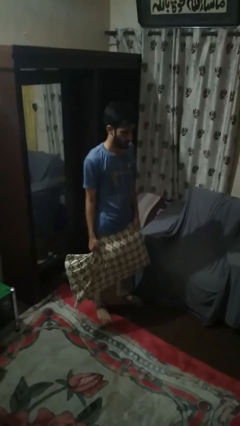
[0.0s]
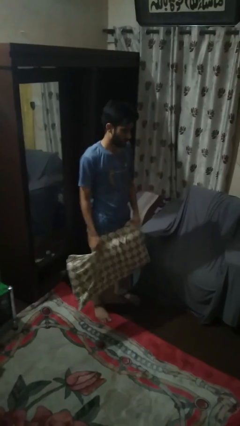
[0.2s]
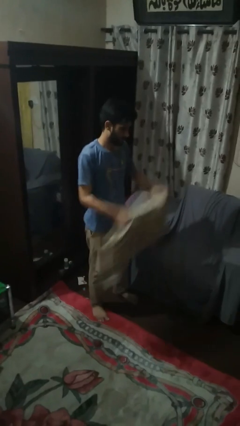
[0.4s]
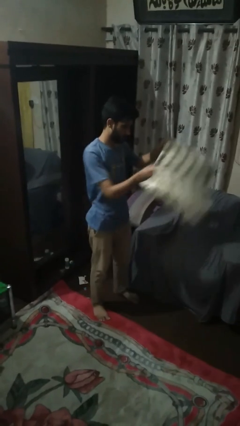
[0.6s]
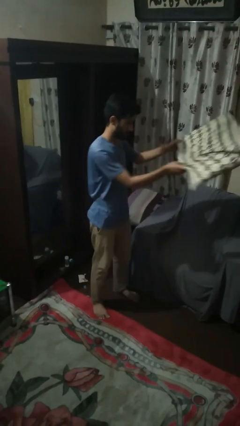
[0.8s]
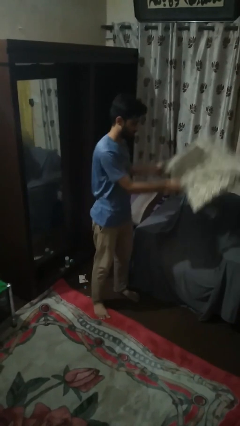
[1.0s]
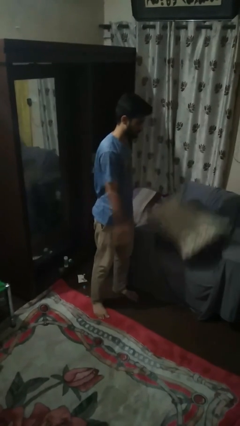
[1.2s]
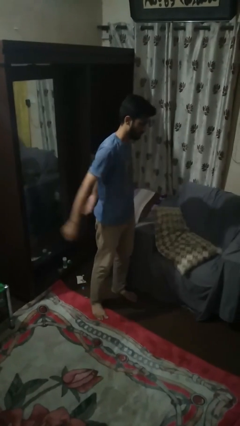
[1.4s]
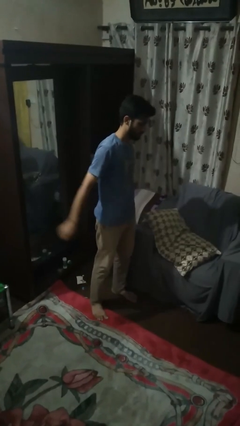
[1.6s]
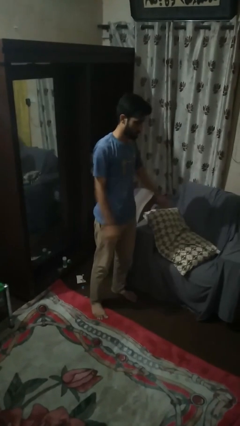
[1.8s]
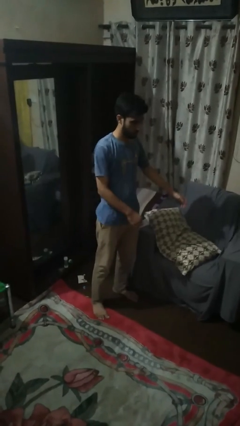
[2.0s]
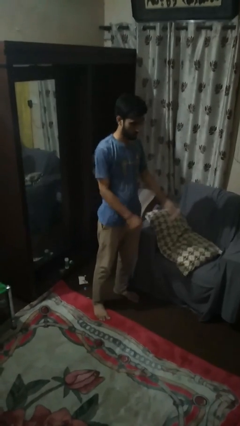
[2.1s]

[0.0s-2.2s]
person puts down object on couch

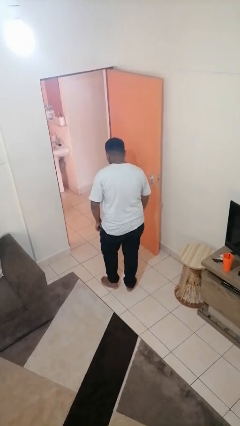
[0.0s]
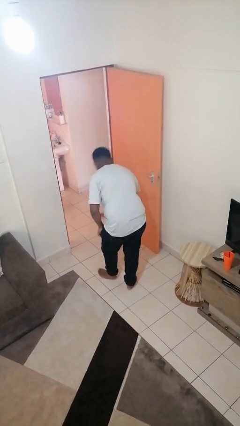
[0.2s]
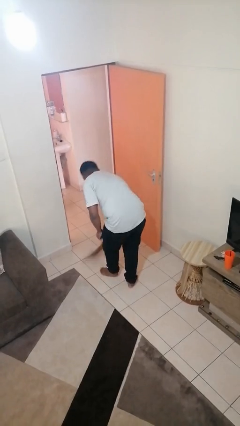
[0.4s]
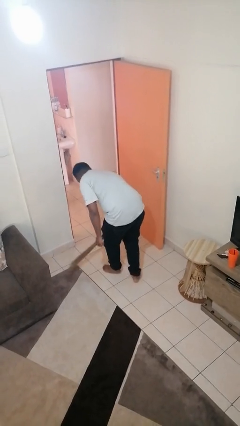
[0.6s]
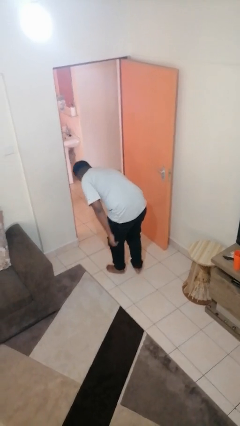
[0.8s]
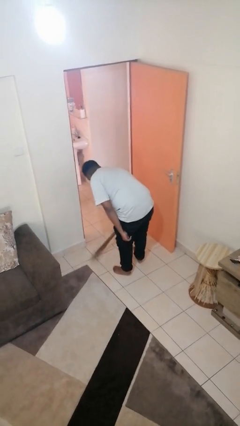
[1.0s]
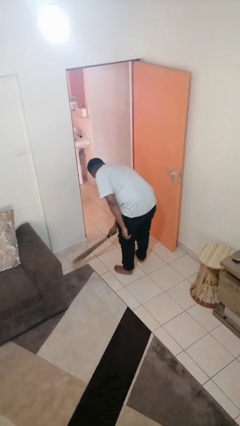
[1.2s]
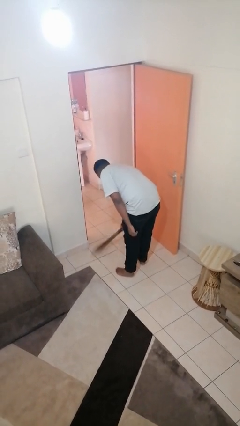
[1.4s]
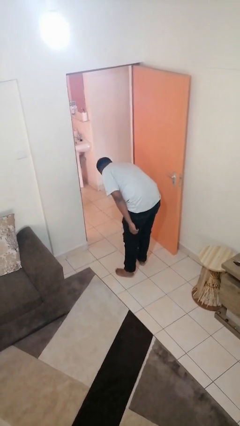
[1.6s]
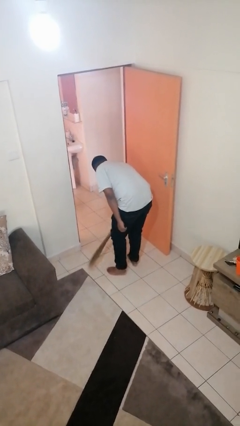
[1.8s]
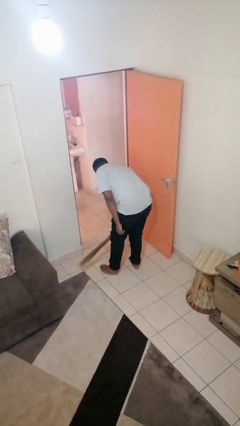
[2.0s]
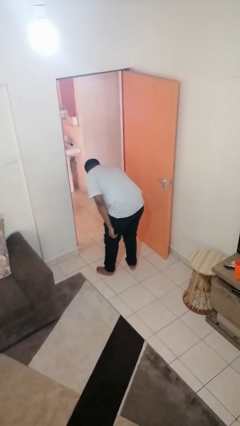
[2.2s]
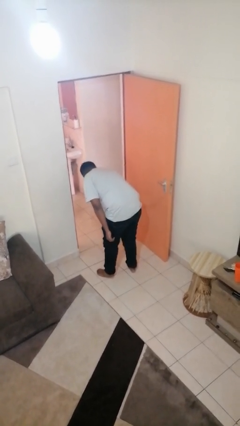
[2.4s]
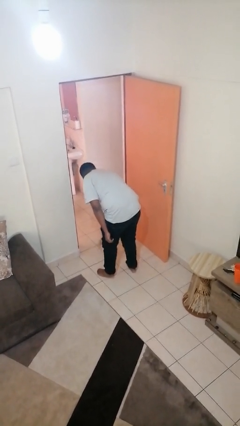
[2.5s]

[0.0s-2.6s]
person sweeps floor

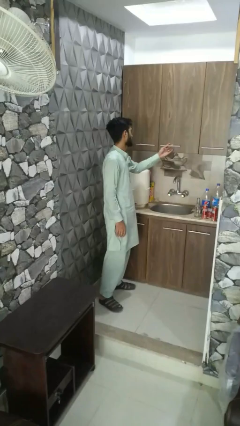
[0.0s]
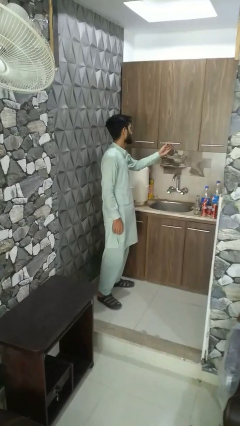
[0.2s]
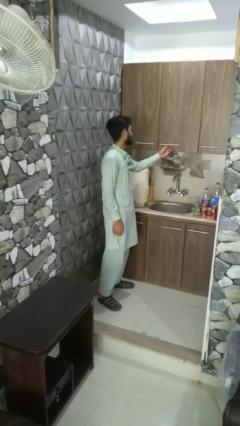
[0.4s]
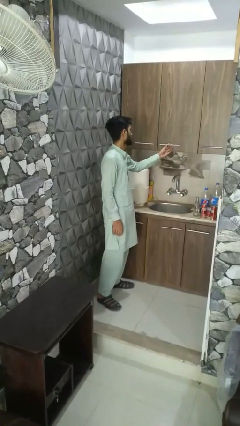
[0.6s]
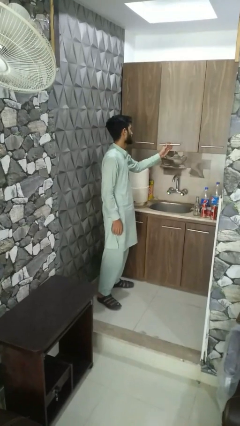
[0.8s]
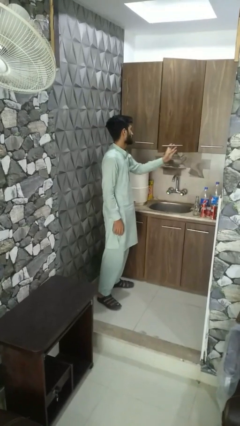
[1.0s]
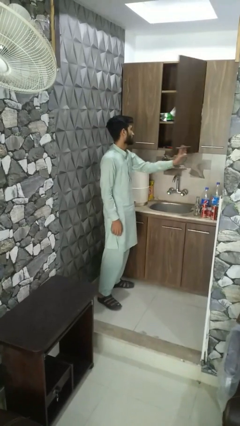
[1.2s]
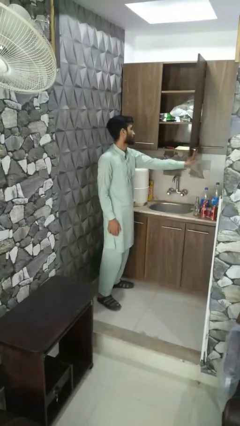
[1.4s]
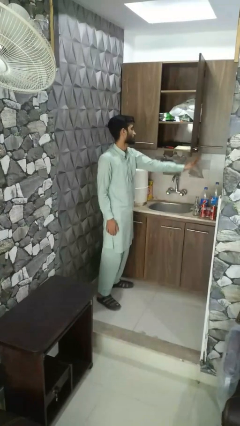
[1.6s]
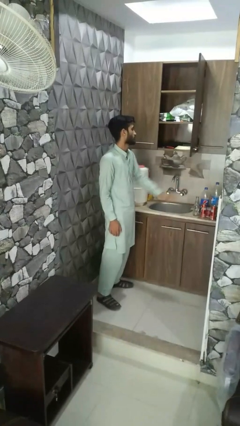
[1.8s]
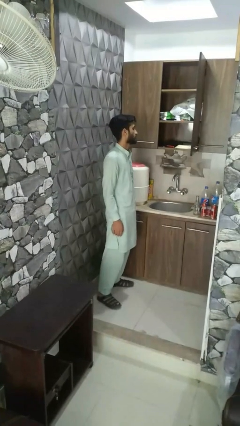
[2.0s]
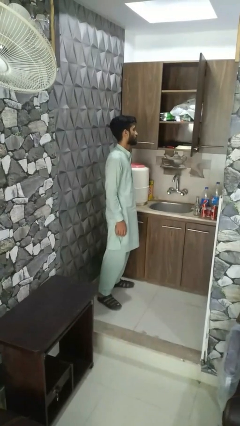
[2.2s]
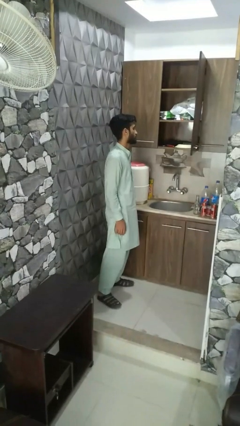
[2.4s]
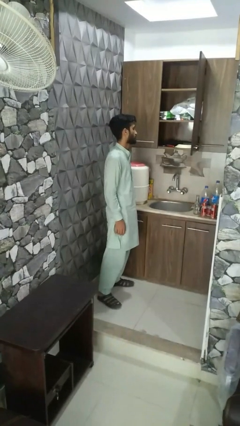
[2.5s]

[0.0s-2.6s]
person opens cabinet

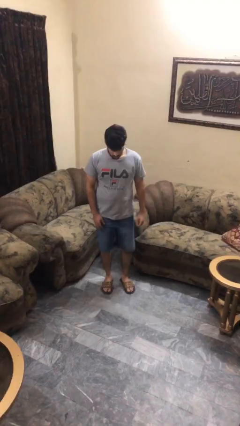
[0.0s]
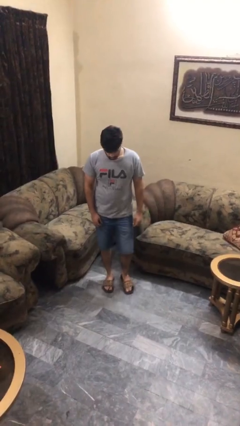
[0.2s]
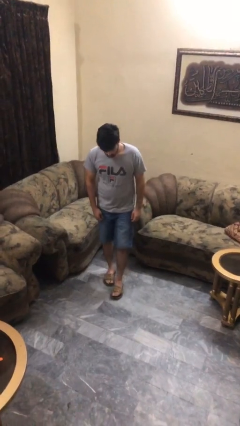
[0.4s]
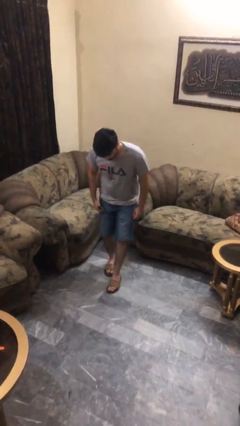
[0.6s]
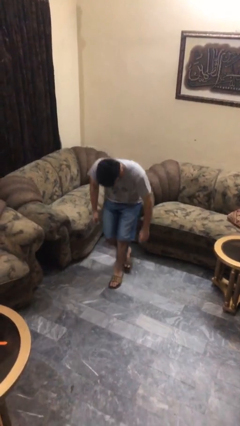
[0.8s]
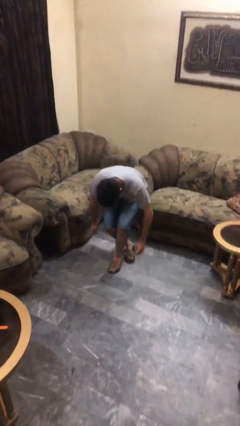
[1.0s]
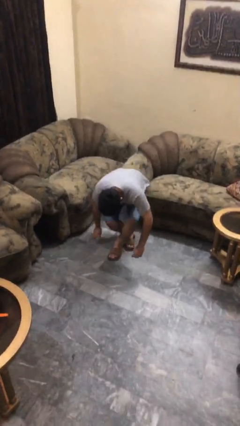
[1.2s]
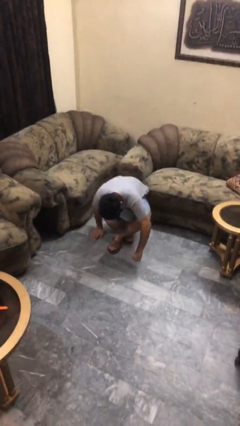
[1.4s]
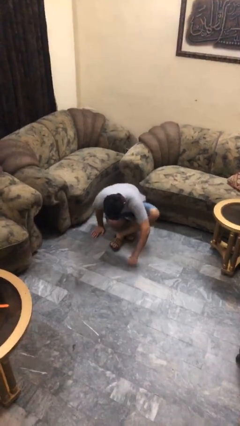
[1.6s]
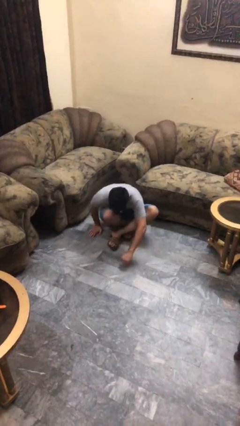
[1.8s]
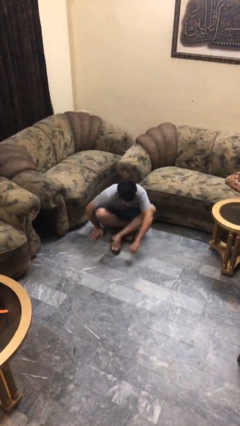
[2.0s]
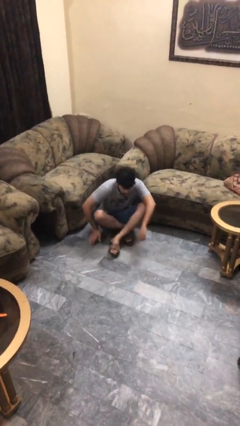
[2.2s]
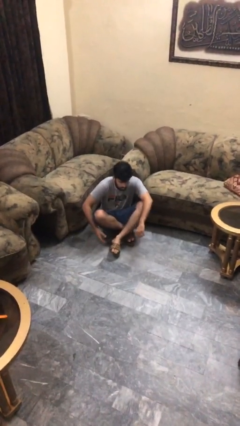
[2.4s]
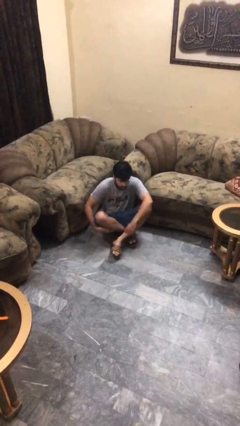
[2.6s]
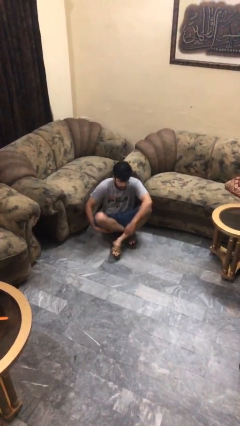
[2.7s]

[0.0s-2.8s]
person sits crisscross

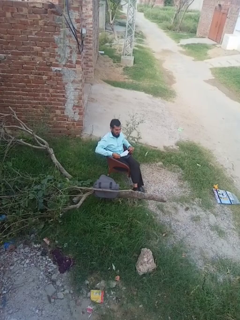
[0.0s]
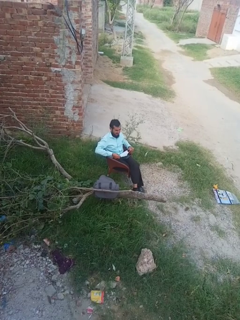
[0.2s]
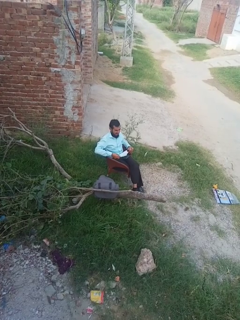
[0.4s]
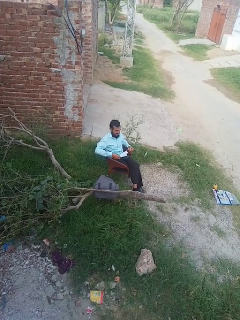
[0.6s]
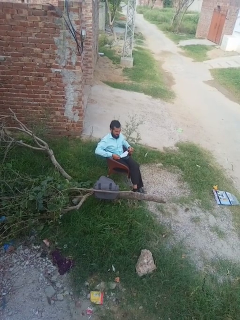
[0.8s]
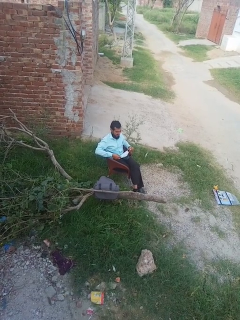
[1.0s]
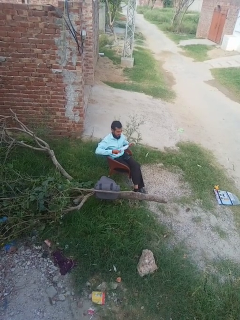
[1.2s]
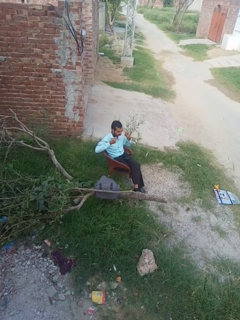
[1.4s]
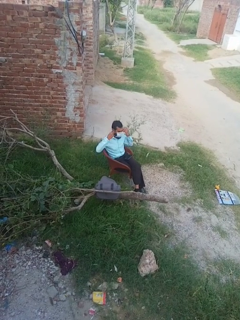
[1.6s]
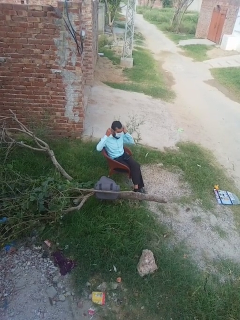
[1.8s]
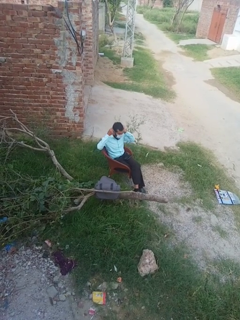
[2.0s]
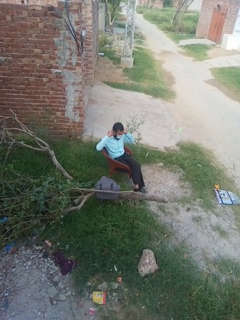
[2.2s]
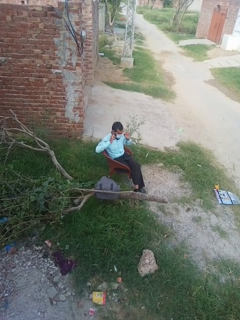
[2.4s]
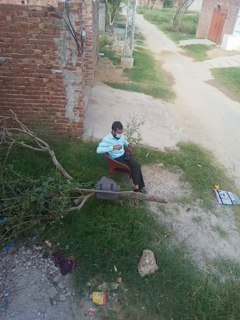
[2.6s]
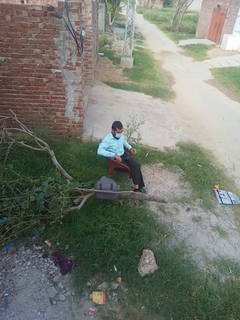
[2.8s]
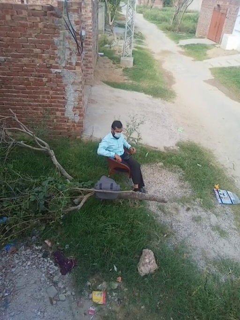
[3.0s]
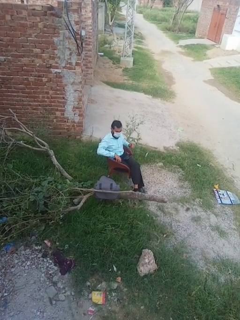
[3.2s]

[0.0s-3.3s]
person puts on facemask

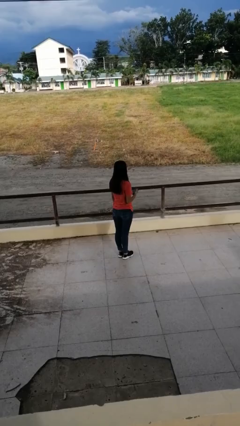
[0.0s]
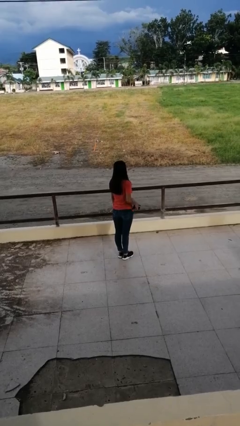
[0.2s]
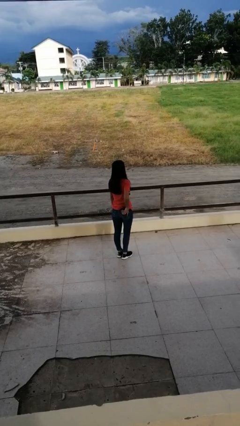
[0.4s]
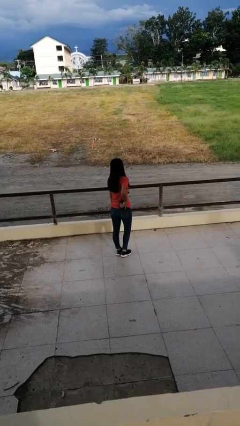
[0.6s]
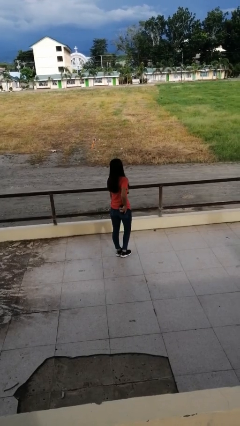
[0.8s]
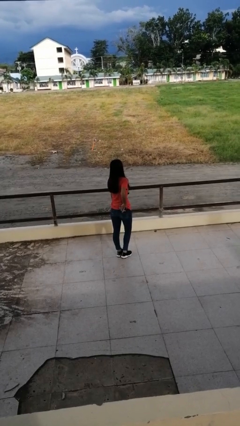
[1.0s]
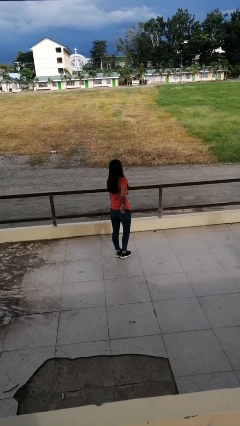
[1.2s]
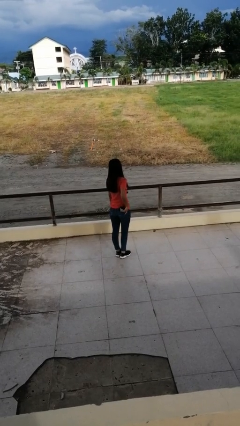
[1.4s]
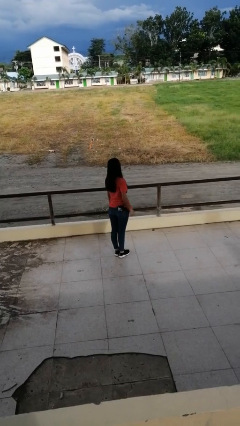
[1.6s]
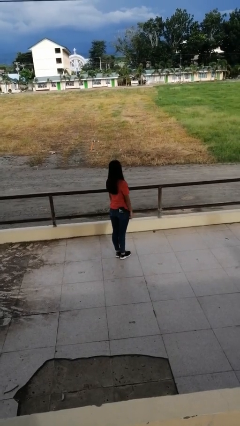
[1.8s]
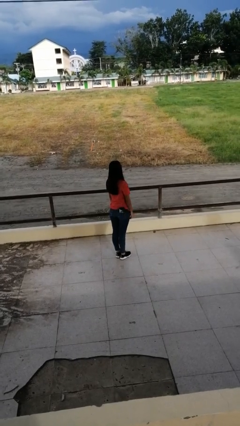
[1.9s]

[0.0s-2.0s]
person puts phone into pocket

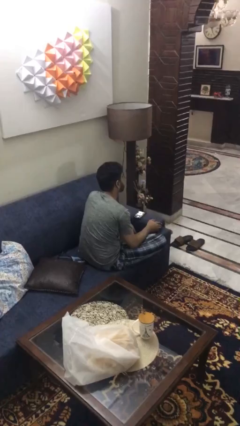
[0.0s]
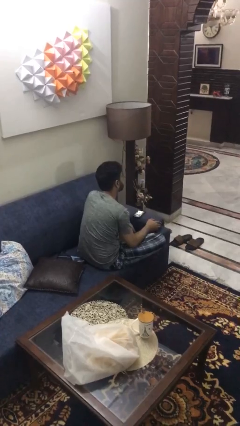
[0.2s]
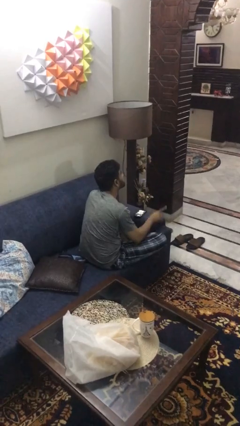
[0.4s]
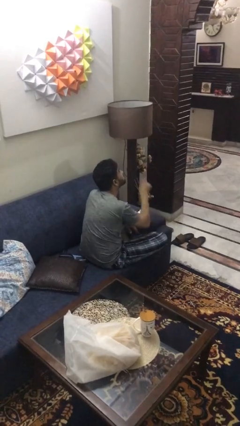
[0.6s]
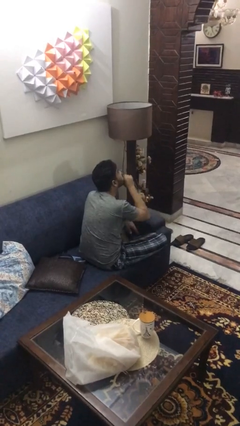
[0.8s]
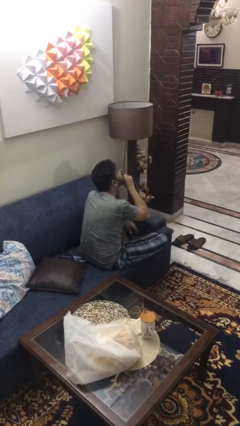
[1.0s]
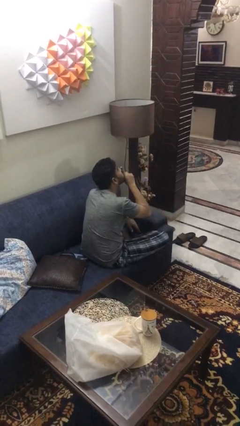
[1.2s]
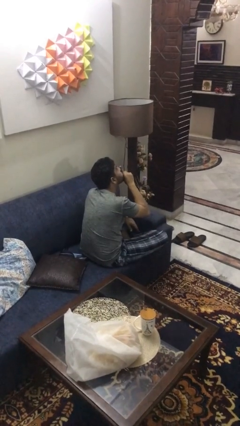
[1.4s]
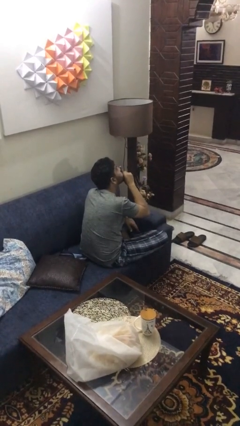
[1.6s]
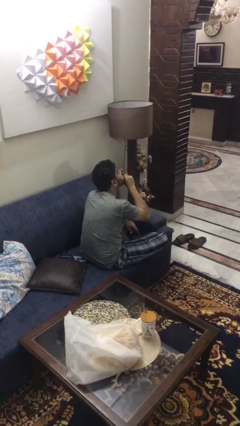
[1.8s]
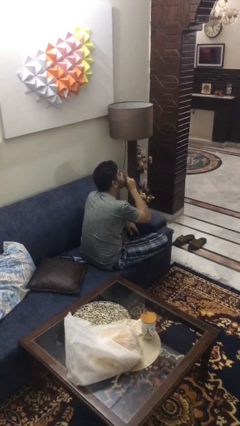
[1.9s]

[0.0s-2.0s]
person gestures be quiet

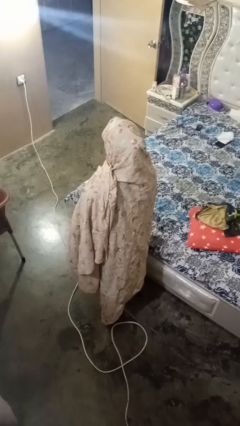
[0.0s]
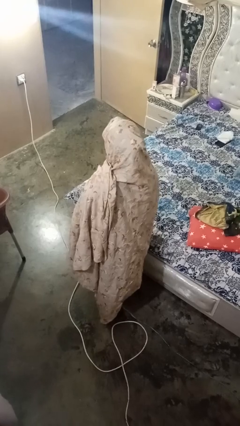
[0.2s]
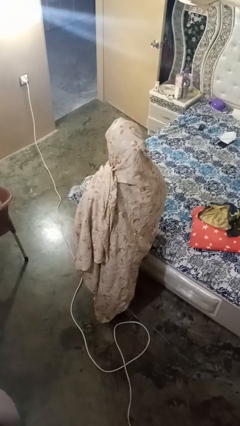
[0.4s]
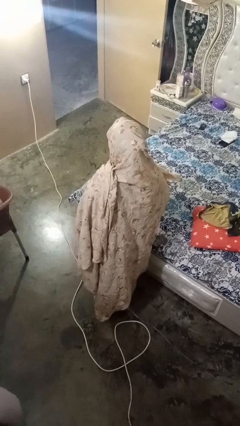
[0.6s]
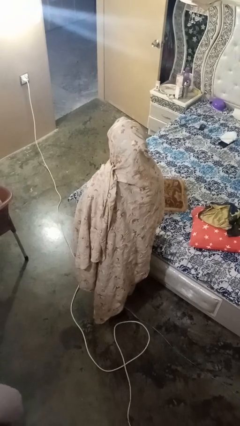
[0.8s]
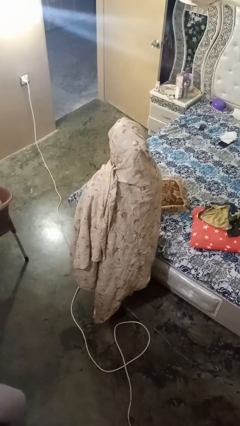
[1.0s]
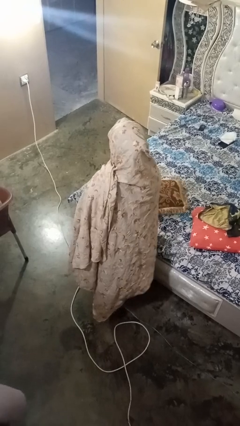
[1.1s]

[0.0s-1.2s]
person puts down object on bed
